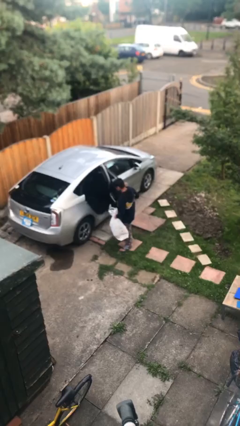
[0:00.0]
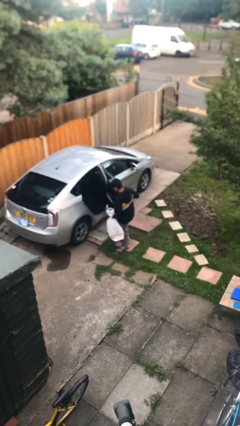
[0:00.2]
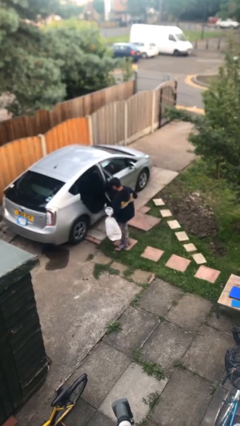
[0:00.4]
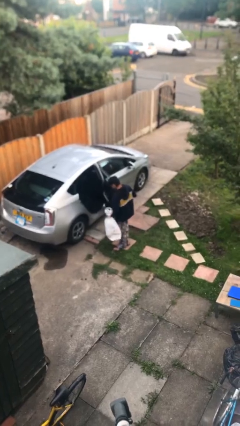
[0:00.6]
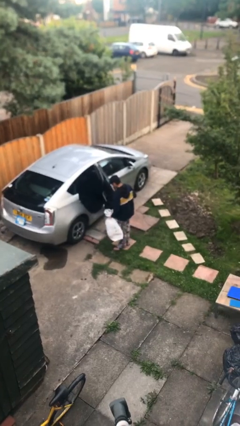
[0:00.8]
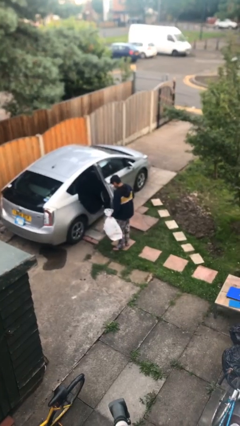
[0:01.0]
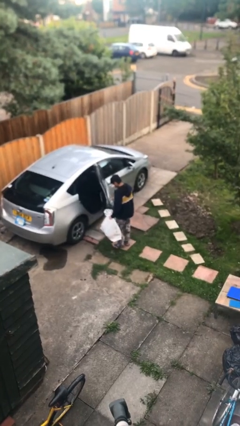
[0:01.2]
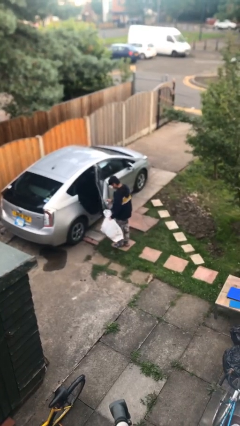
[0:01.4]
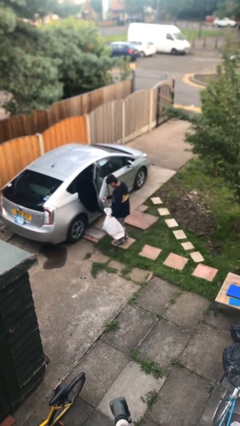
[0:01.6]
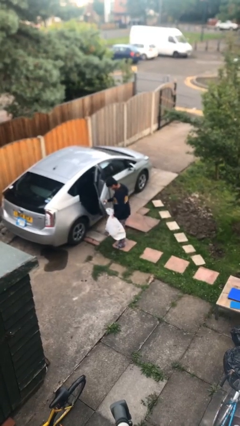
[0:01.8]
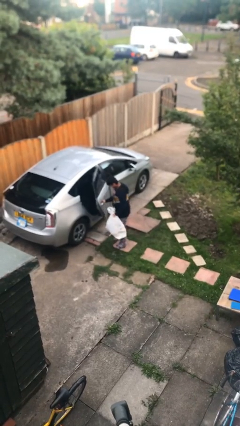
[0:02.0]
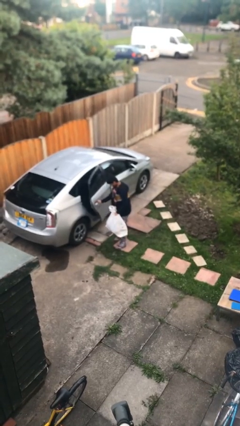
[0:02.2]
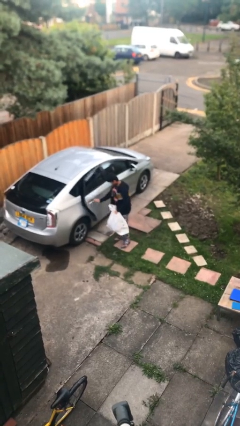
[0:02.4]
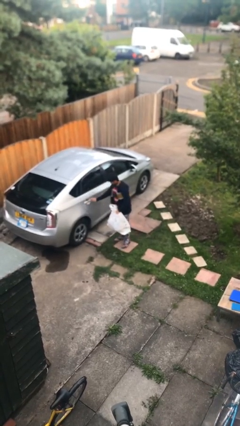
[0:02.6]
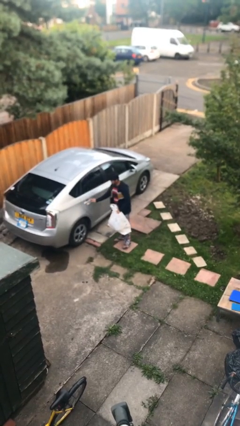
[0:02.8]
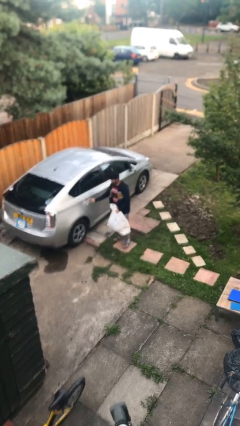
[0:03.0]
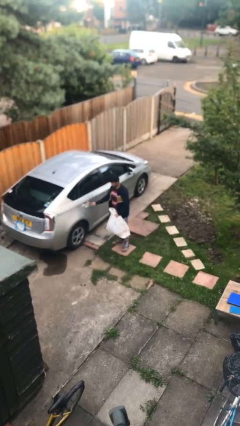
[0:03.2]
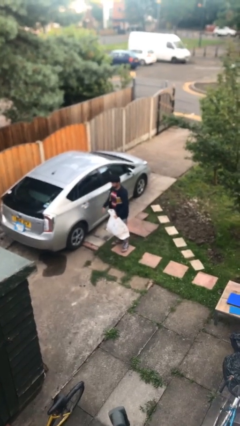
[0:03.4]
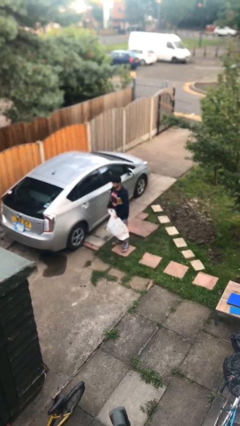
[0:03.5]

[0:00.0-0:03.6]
person closes car door

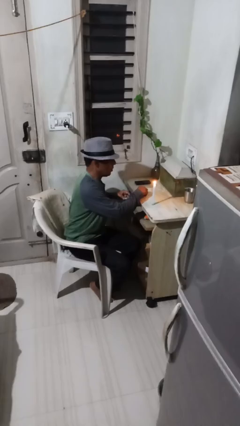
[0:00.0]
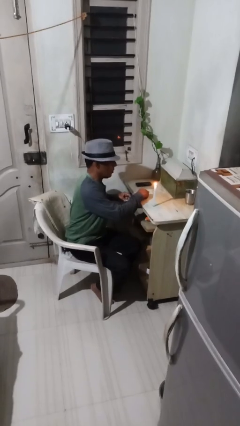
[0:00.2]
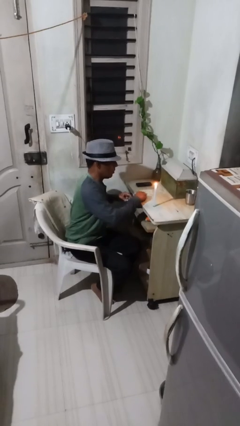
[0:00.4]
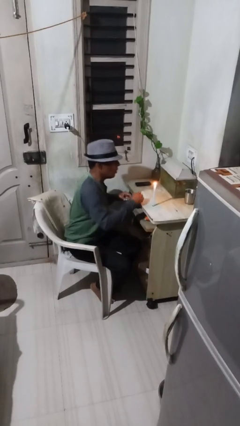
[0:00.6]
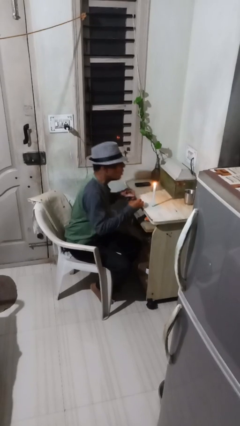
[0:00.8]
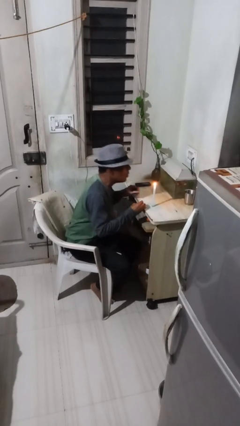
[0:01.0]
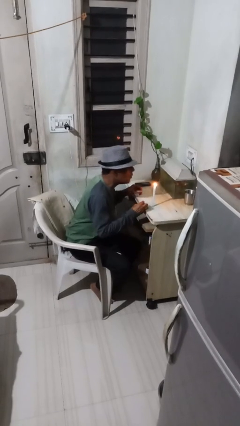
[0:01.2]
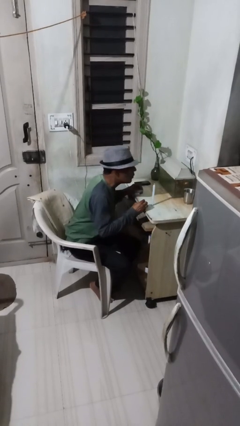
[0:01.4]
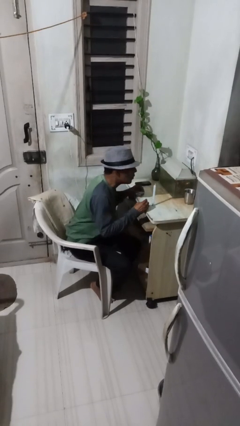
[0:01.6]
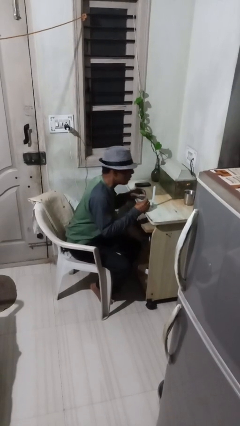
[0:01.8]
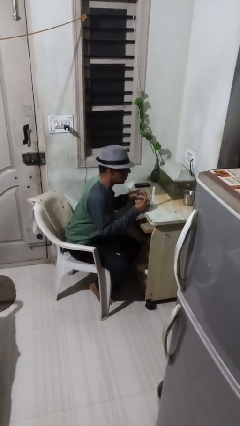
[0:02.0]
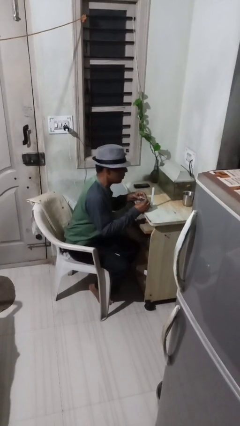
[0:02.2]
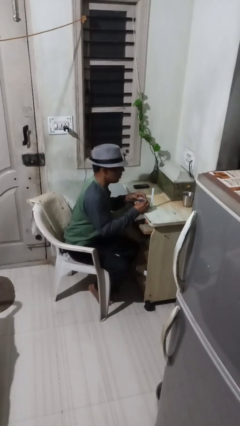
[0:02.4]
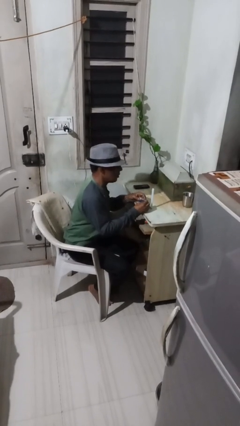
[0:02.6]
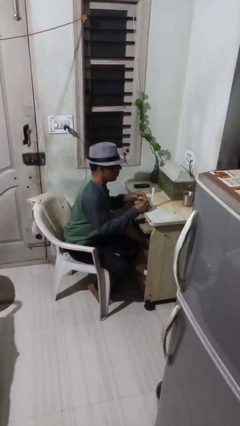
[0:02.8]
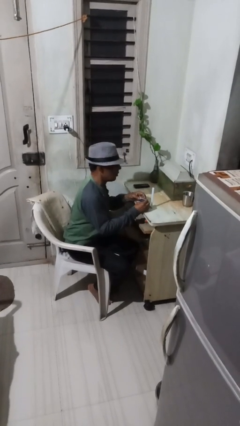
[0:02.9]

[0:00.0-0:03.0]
person extinguishes candle

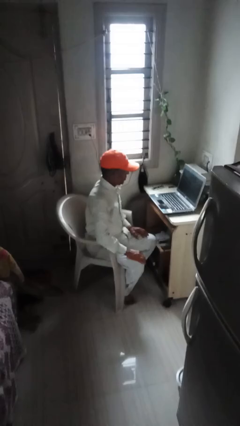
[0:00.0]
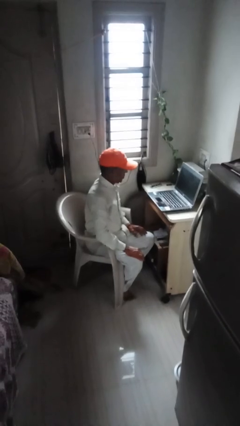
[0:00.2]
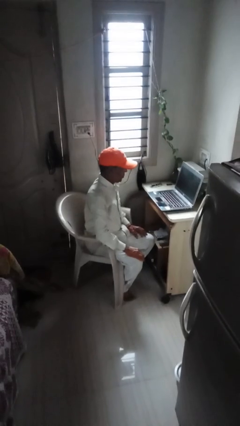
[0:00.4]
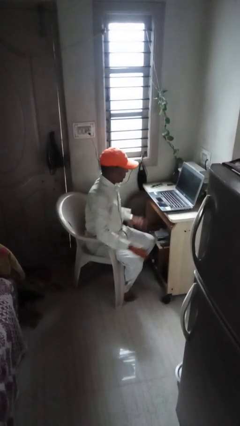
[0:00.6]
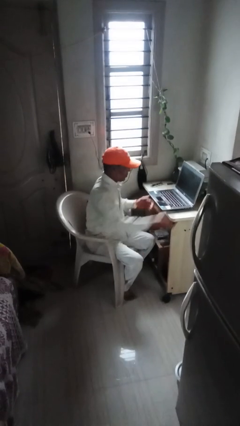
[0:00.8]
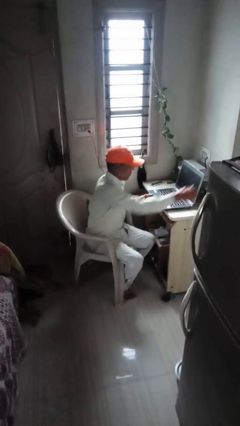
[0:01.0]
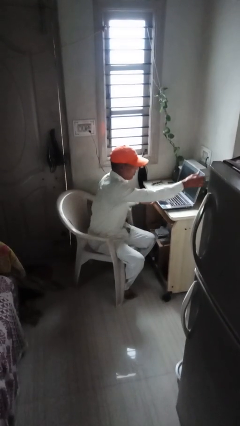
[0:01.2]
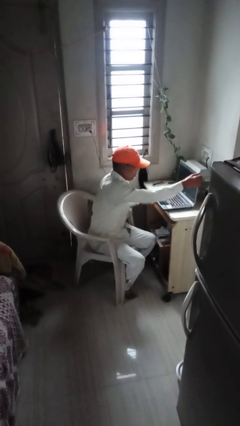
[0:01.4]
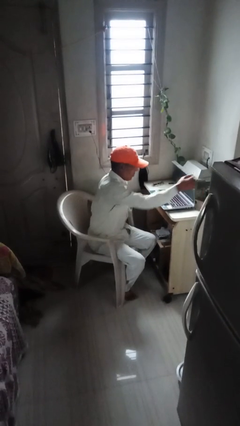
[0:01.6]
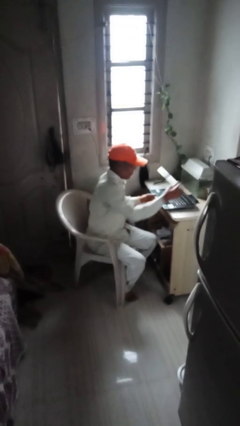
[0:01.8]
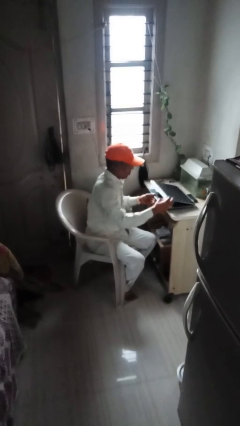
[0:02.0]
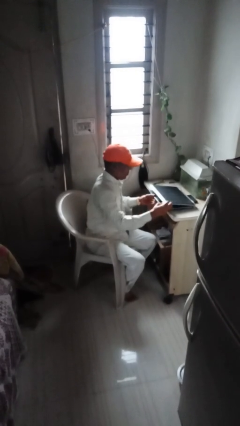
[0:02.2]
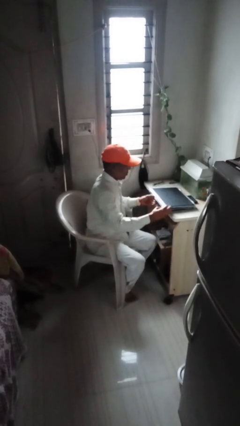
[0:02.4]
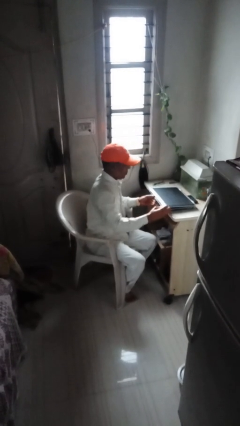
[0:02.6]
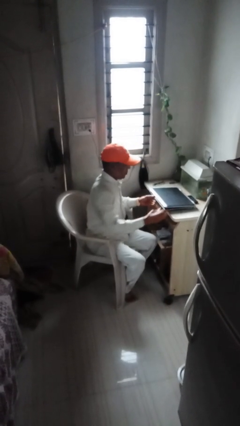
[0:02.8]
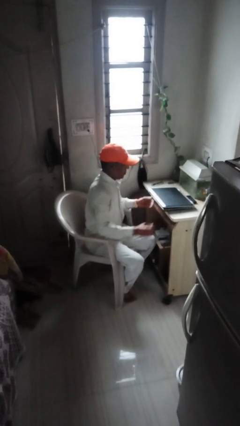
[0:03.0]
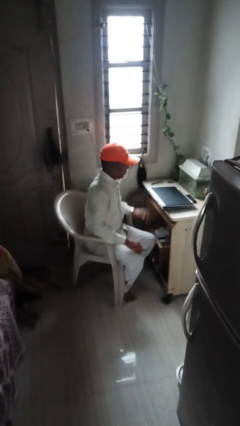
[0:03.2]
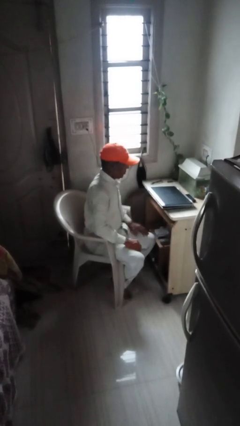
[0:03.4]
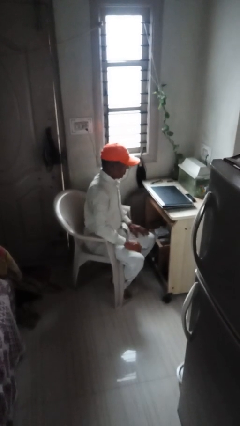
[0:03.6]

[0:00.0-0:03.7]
person closes laptop

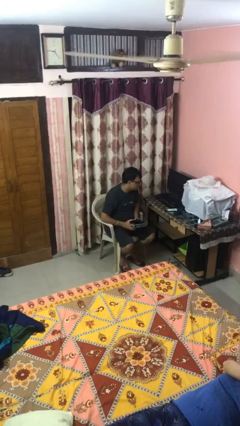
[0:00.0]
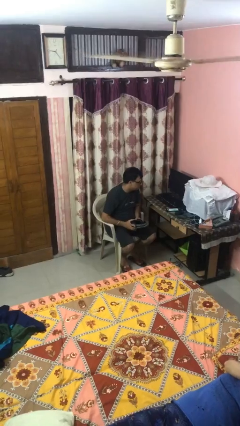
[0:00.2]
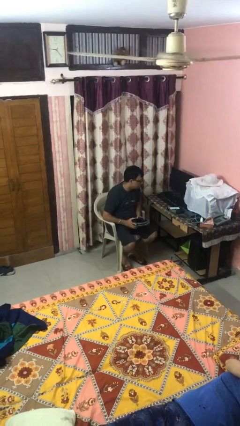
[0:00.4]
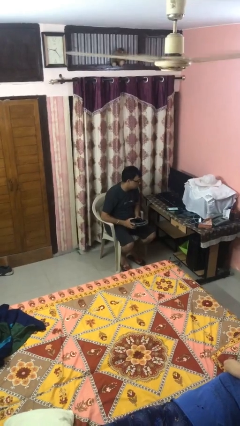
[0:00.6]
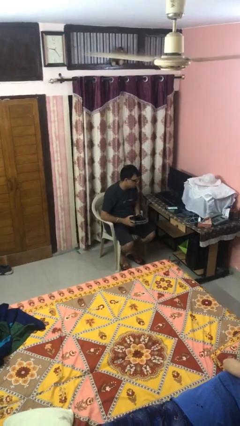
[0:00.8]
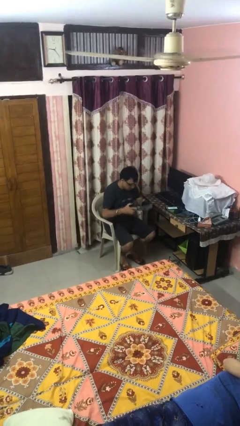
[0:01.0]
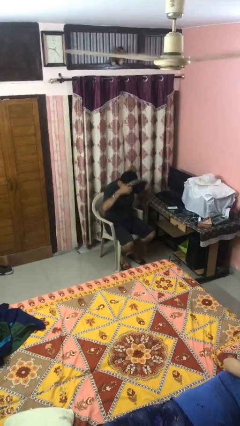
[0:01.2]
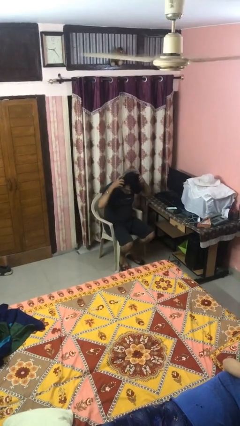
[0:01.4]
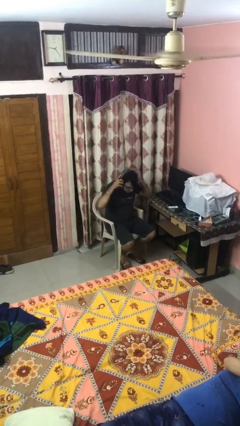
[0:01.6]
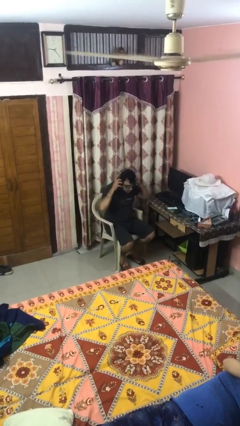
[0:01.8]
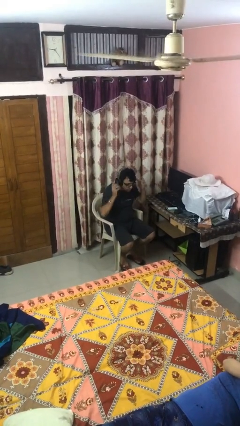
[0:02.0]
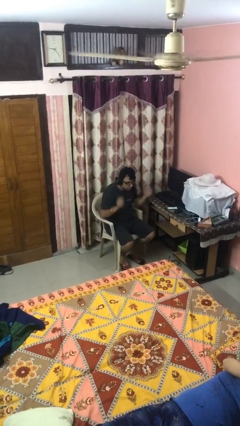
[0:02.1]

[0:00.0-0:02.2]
person puts on headphones

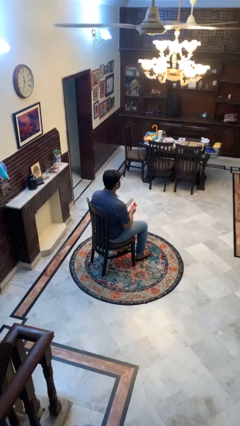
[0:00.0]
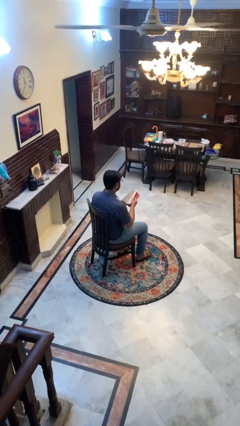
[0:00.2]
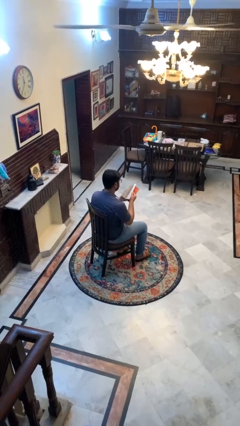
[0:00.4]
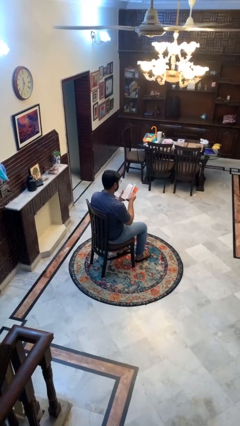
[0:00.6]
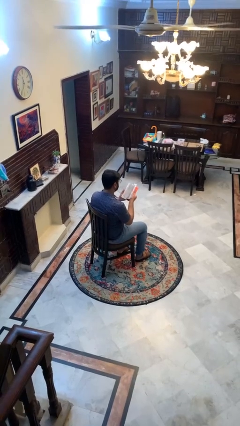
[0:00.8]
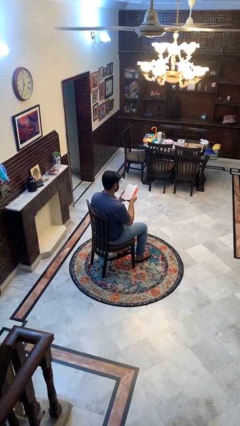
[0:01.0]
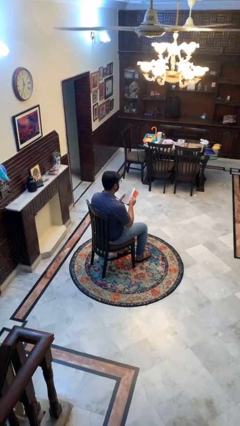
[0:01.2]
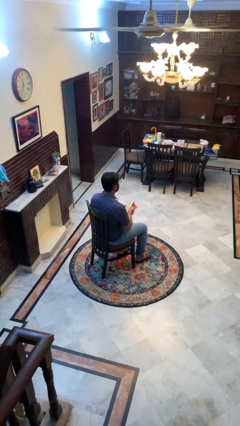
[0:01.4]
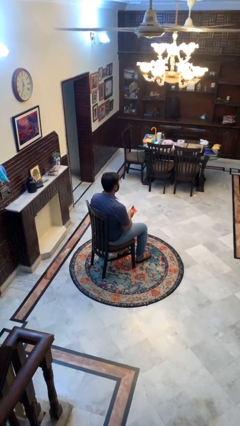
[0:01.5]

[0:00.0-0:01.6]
person reads magazine

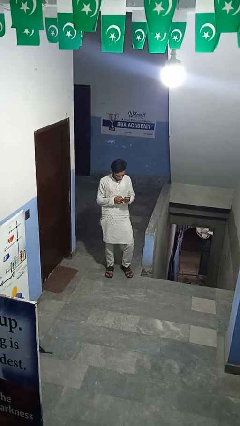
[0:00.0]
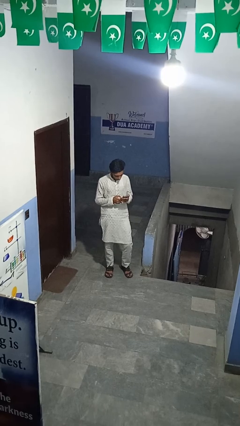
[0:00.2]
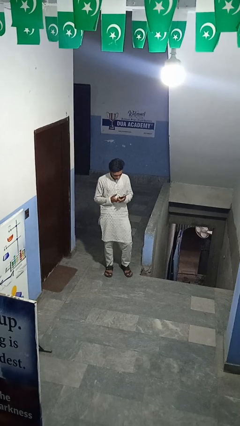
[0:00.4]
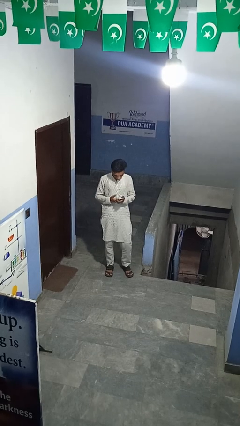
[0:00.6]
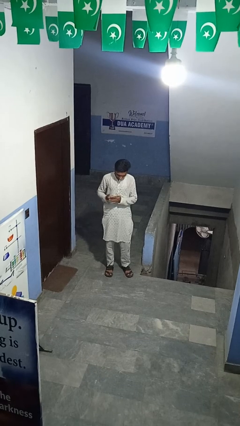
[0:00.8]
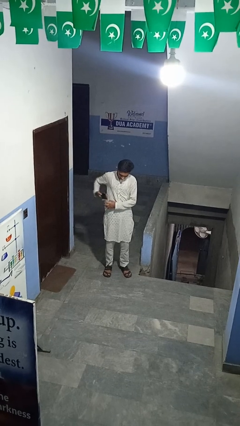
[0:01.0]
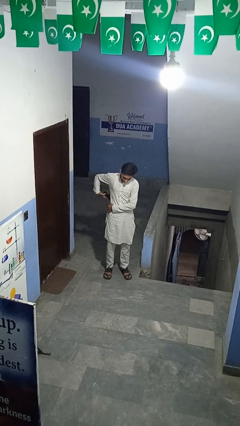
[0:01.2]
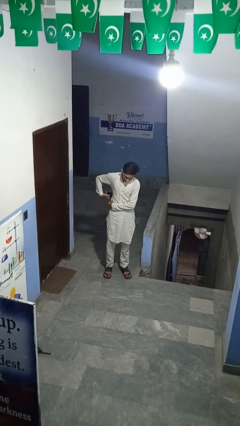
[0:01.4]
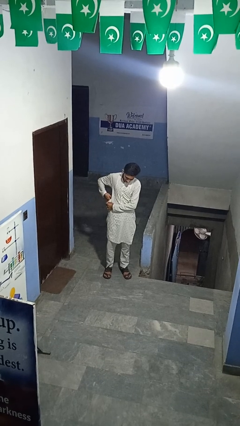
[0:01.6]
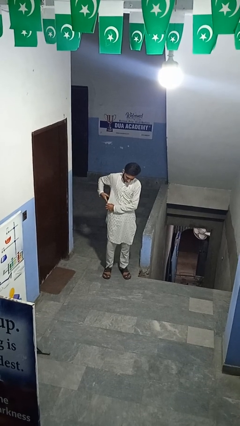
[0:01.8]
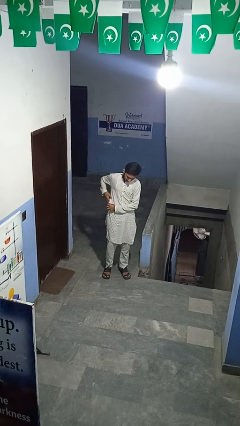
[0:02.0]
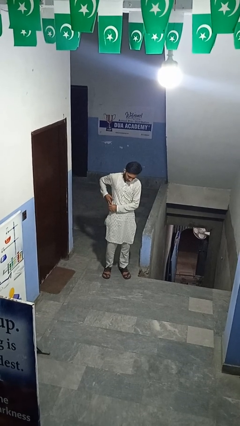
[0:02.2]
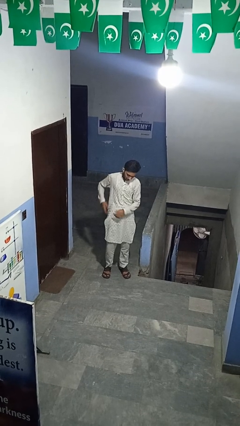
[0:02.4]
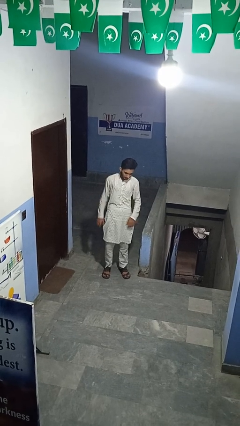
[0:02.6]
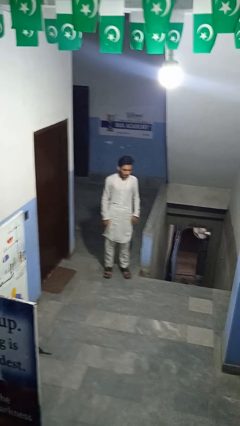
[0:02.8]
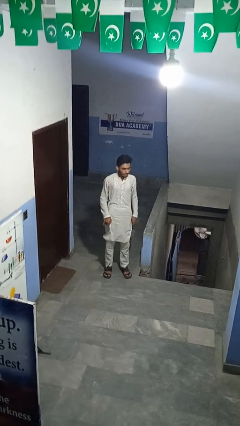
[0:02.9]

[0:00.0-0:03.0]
person puts hands in back pockets

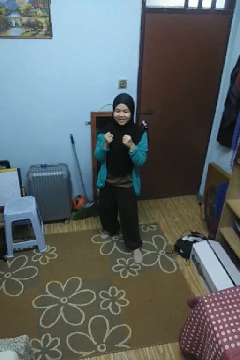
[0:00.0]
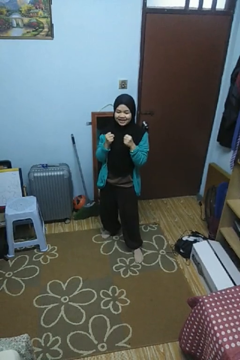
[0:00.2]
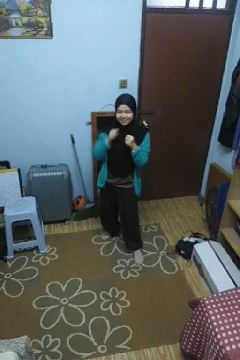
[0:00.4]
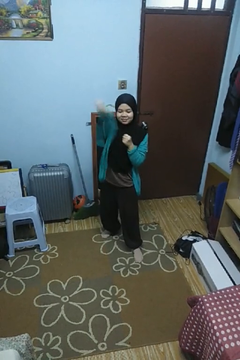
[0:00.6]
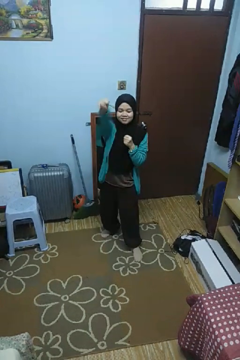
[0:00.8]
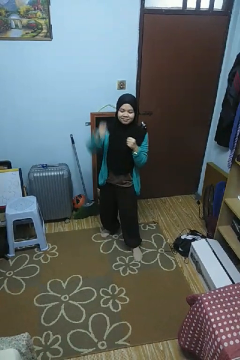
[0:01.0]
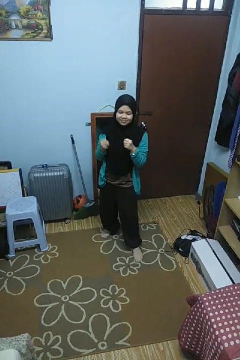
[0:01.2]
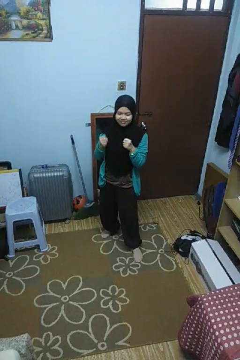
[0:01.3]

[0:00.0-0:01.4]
person punches
